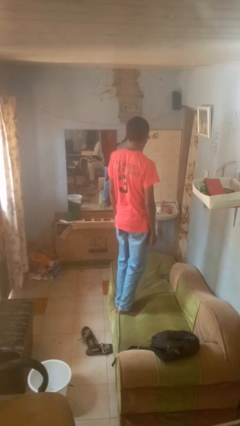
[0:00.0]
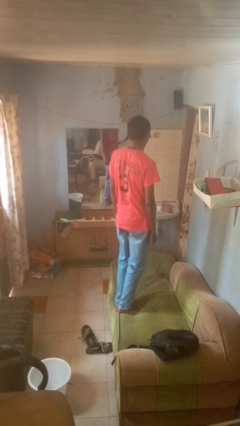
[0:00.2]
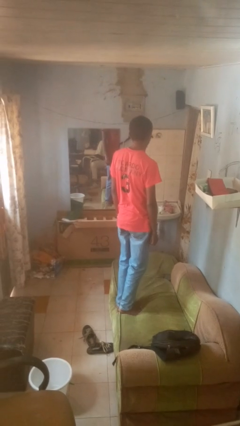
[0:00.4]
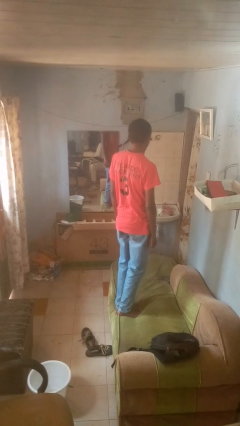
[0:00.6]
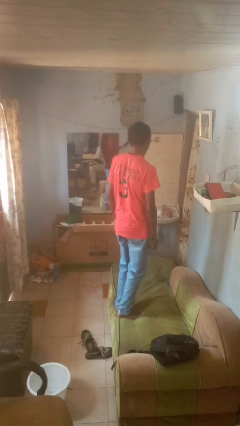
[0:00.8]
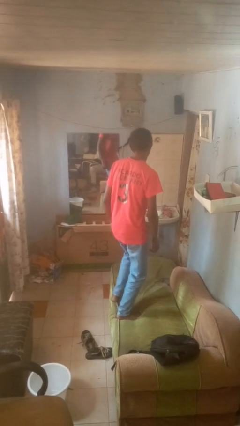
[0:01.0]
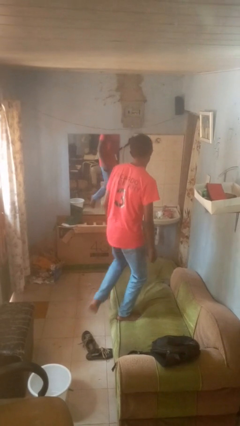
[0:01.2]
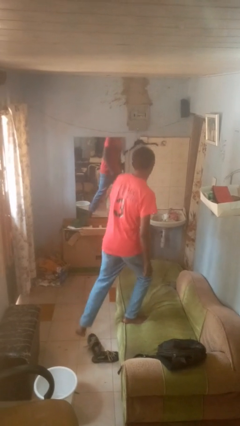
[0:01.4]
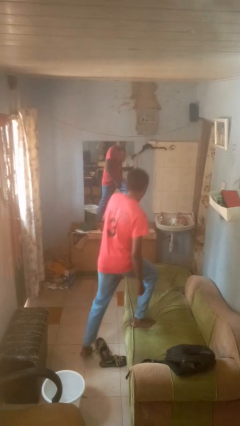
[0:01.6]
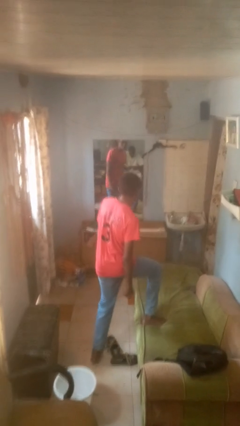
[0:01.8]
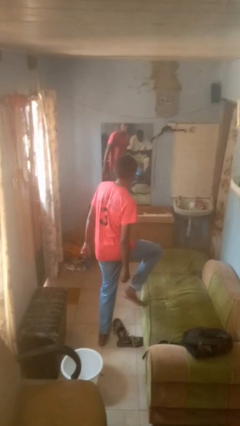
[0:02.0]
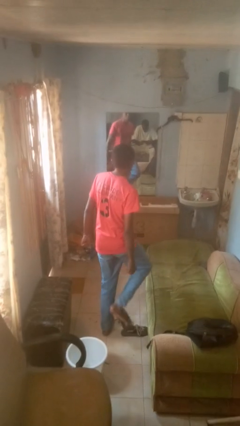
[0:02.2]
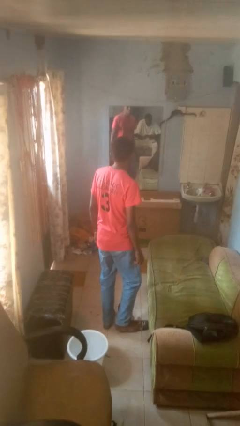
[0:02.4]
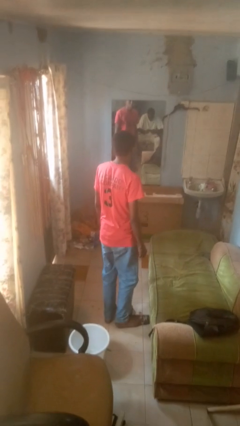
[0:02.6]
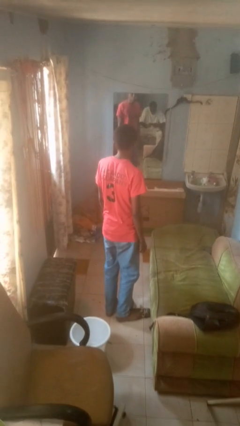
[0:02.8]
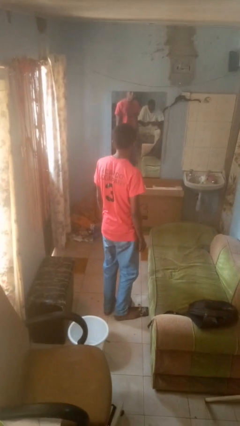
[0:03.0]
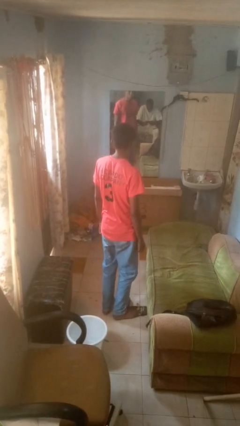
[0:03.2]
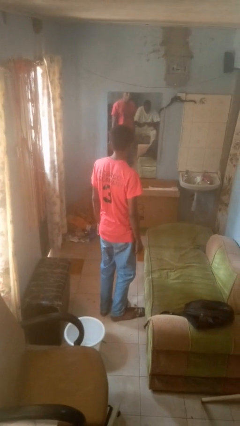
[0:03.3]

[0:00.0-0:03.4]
person climbs off couch

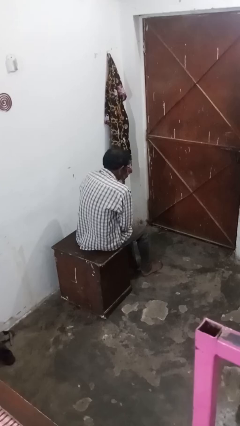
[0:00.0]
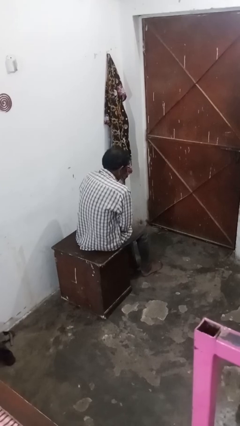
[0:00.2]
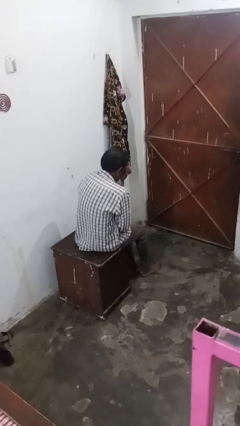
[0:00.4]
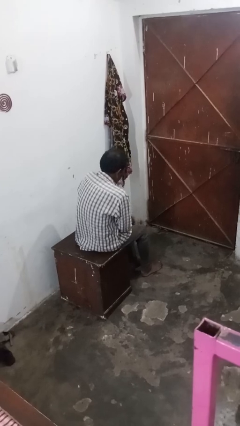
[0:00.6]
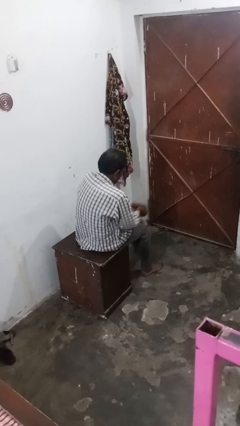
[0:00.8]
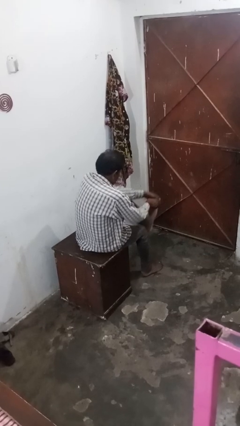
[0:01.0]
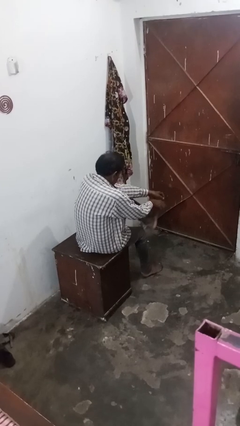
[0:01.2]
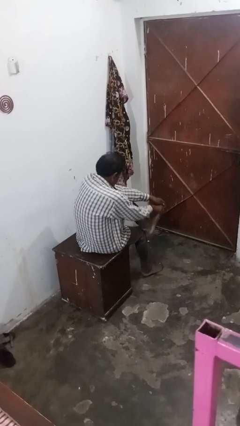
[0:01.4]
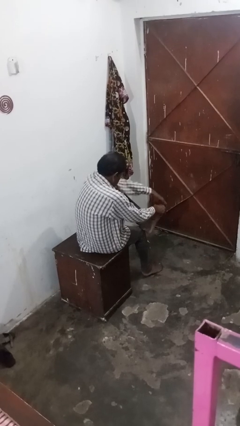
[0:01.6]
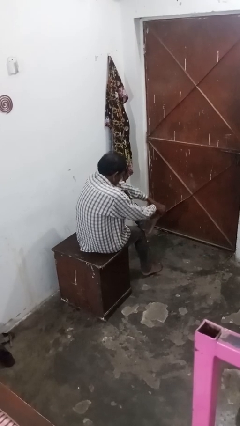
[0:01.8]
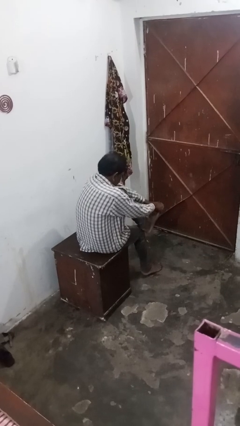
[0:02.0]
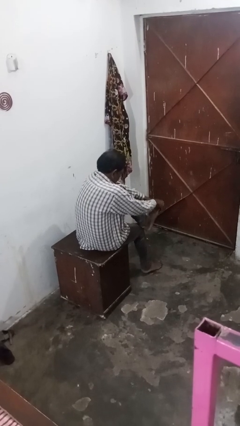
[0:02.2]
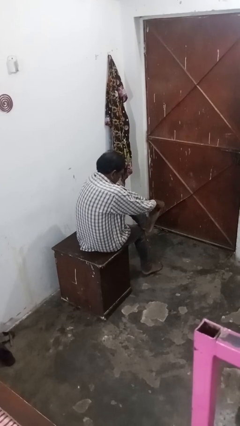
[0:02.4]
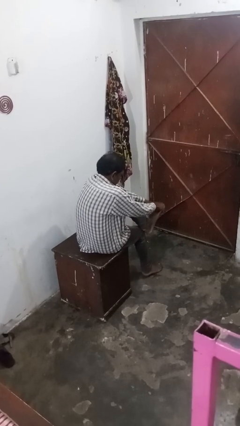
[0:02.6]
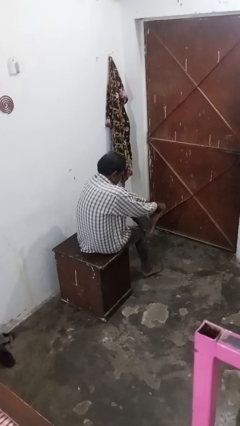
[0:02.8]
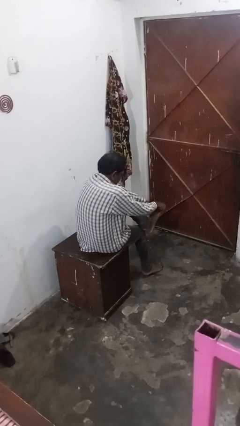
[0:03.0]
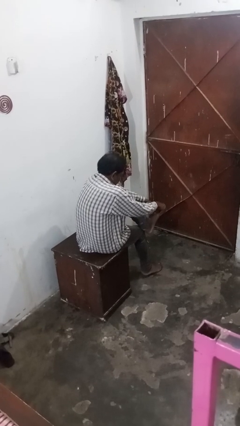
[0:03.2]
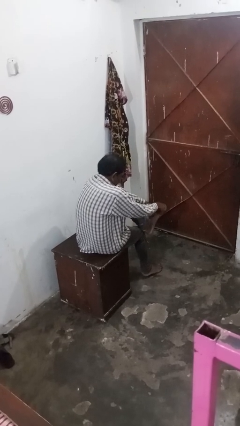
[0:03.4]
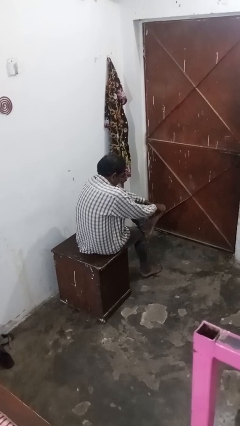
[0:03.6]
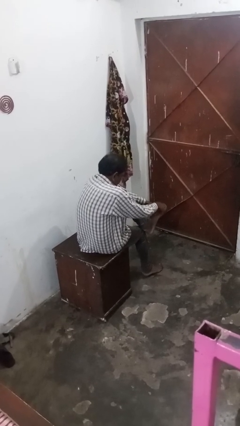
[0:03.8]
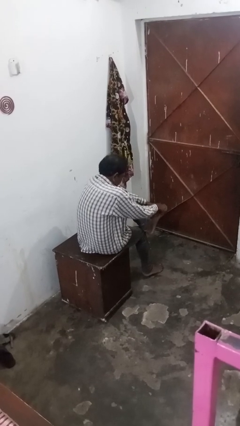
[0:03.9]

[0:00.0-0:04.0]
person rubs foot

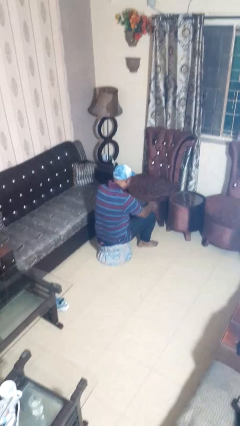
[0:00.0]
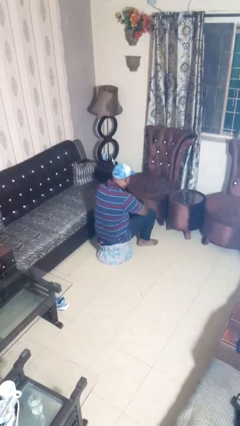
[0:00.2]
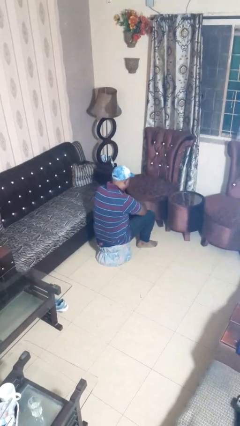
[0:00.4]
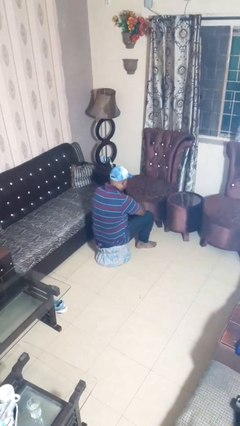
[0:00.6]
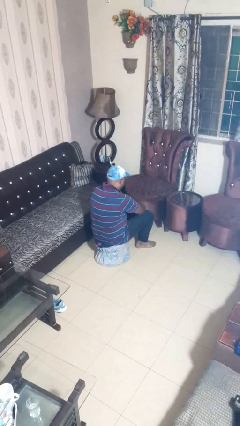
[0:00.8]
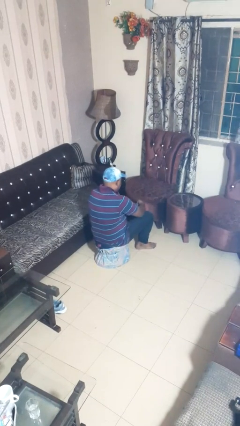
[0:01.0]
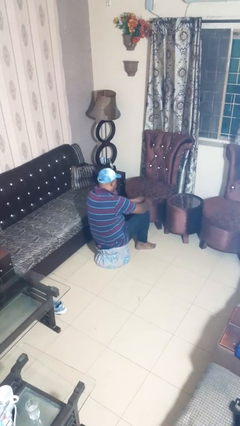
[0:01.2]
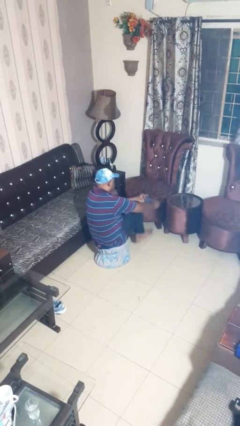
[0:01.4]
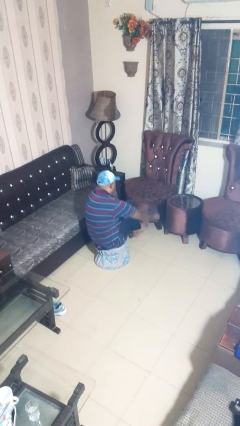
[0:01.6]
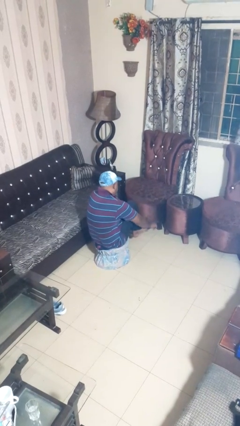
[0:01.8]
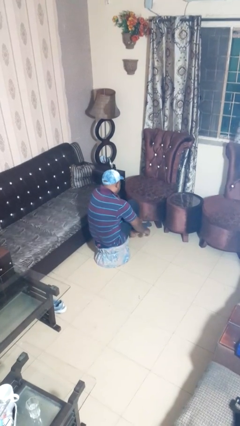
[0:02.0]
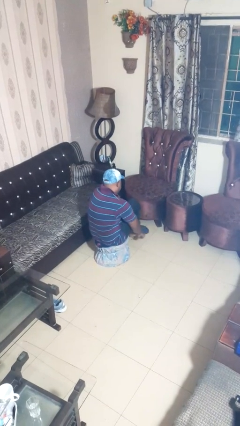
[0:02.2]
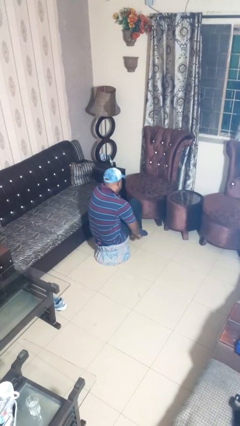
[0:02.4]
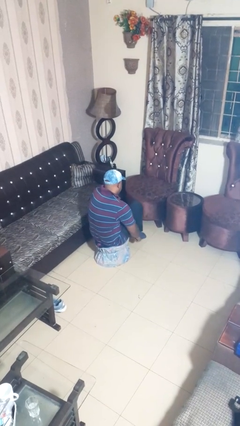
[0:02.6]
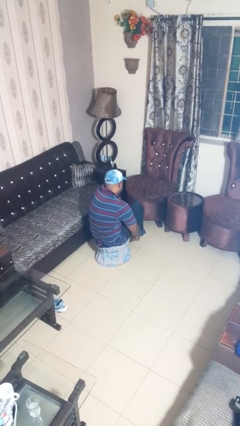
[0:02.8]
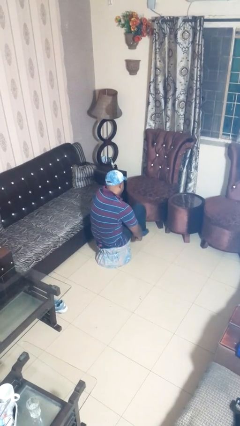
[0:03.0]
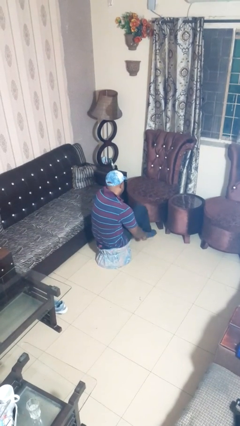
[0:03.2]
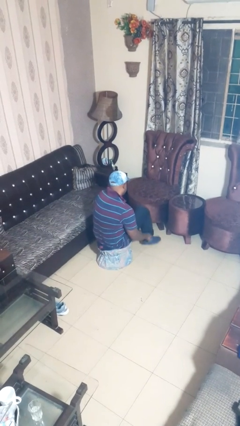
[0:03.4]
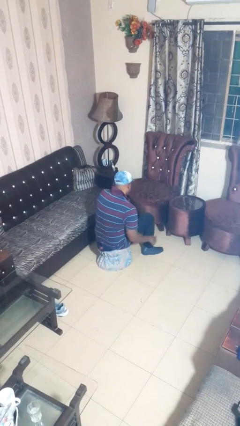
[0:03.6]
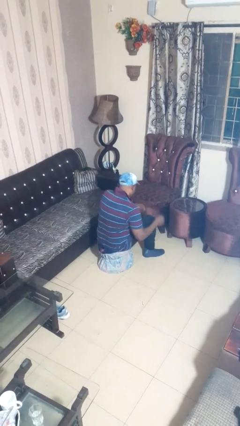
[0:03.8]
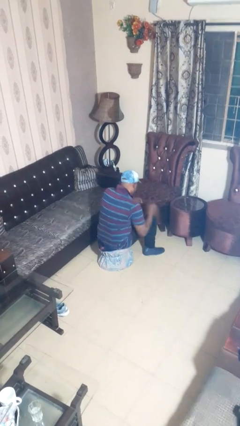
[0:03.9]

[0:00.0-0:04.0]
person puts on socks

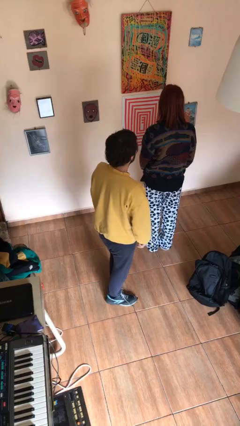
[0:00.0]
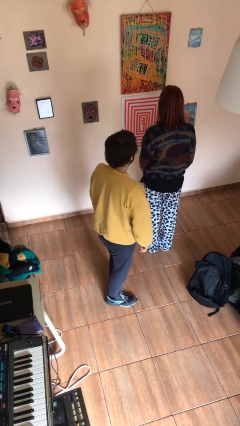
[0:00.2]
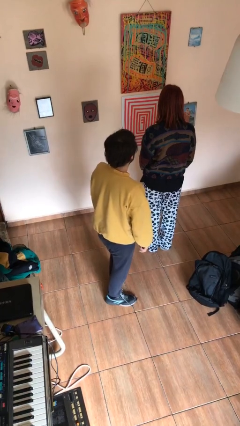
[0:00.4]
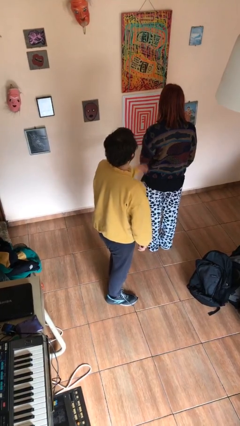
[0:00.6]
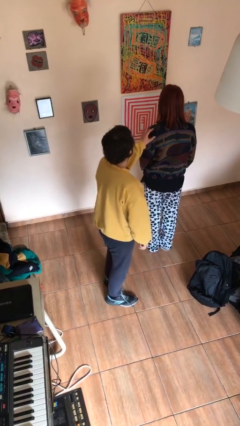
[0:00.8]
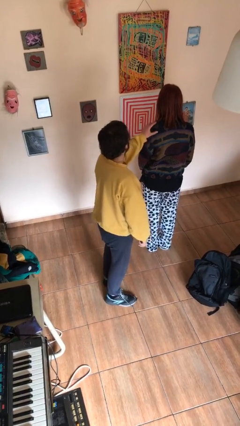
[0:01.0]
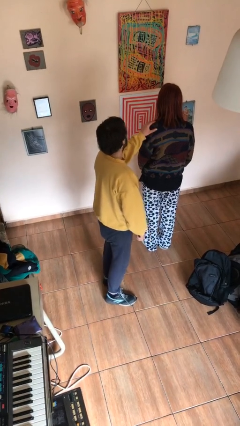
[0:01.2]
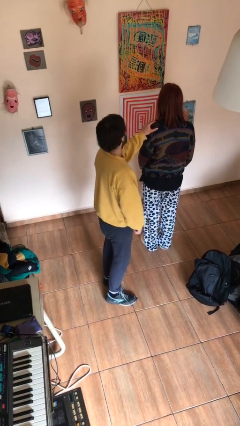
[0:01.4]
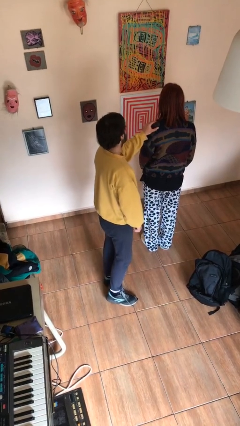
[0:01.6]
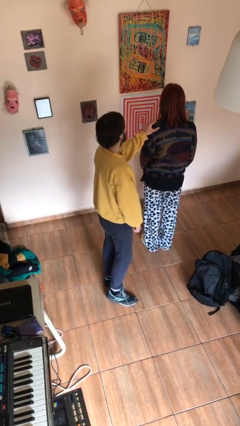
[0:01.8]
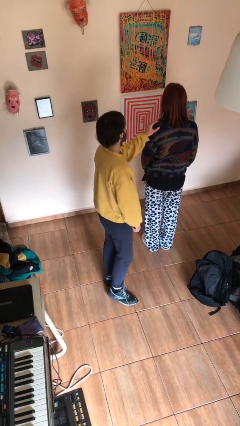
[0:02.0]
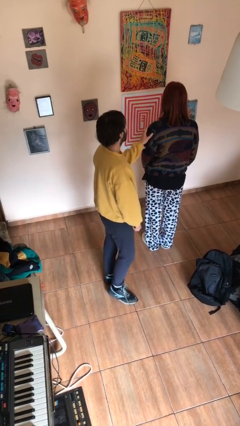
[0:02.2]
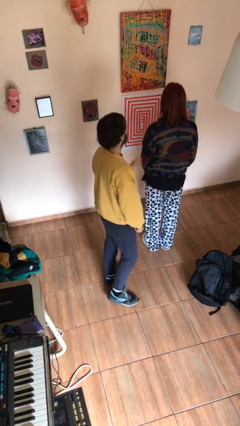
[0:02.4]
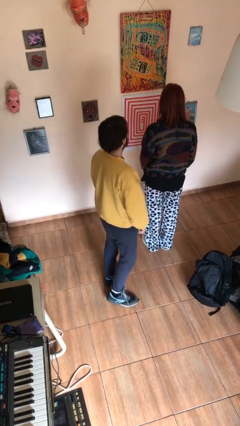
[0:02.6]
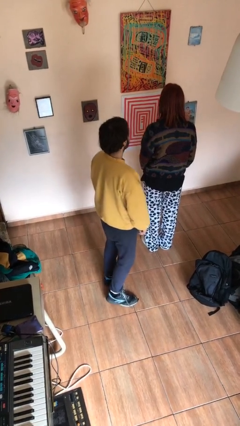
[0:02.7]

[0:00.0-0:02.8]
person touches back of person

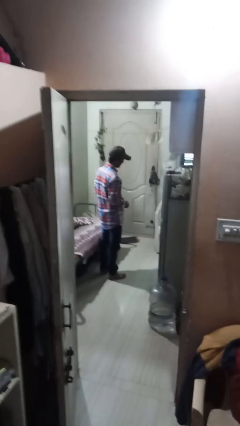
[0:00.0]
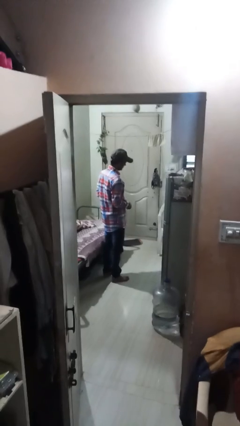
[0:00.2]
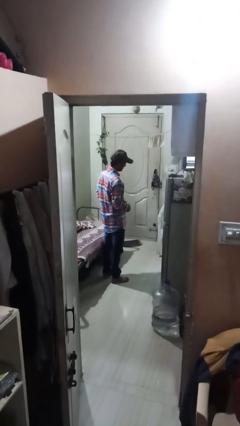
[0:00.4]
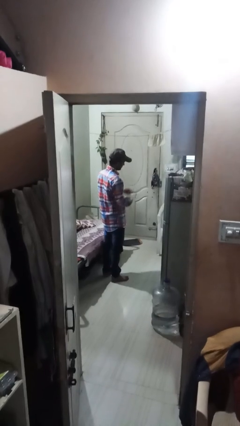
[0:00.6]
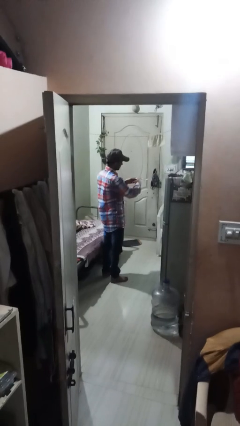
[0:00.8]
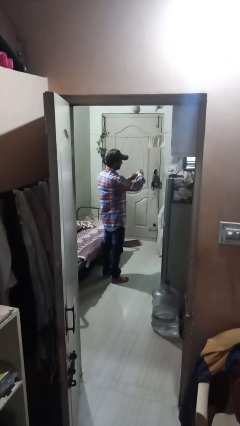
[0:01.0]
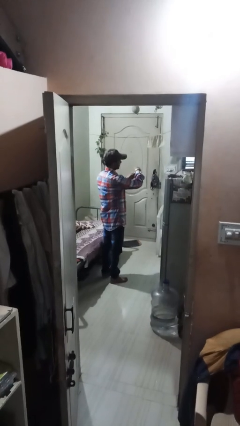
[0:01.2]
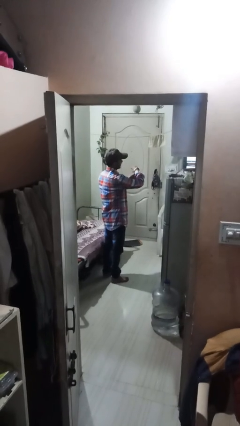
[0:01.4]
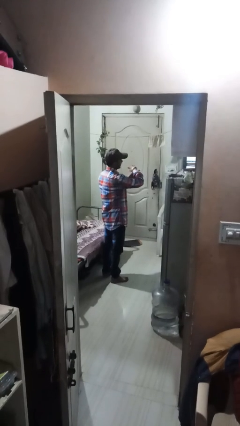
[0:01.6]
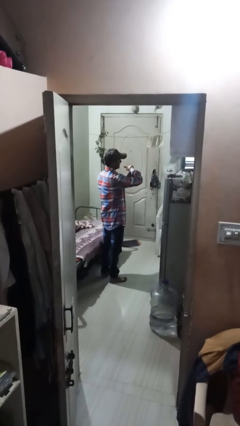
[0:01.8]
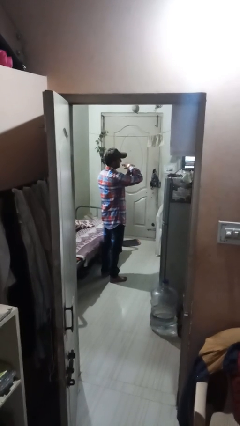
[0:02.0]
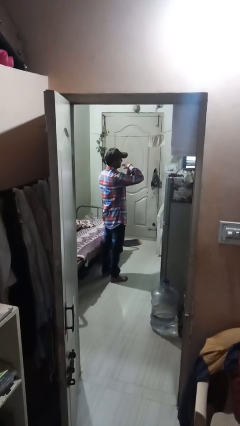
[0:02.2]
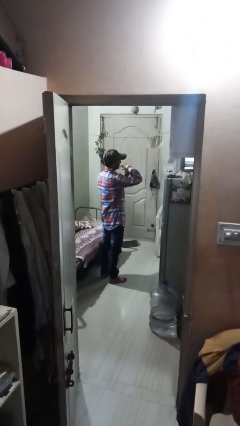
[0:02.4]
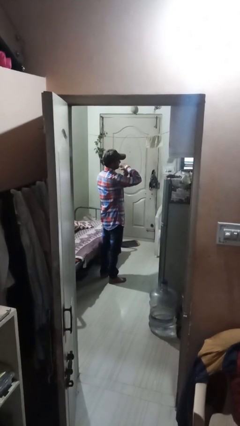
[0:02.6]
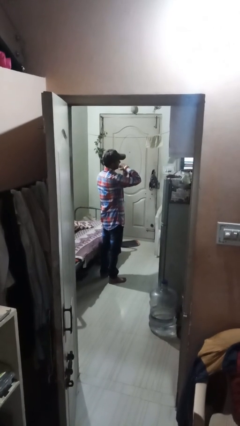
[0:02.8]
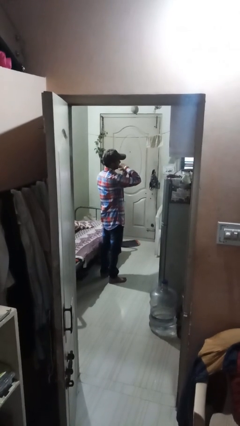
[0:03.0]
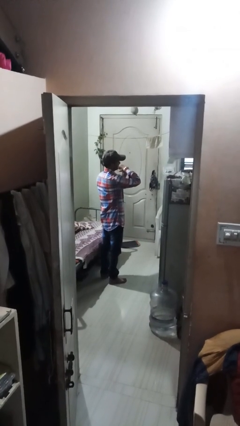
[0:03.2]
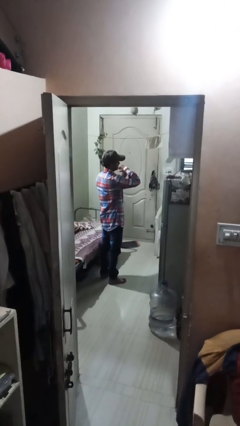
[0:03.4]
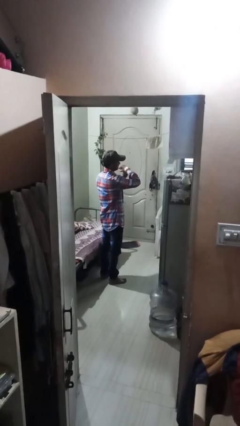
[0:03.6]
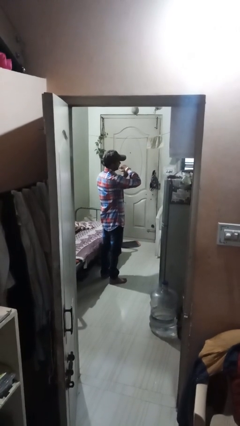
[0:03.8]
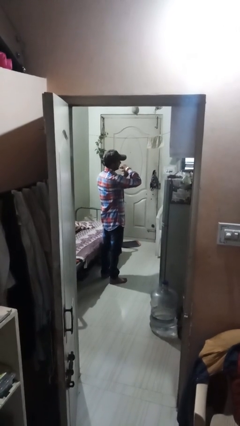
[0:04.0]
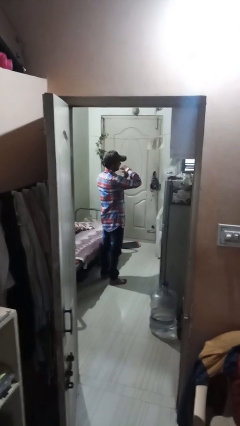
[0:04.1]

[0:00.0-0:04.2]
person puts on wristwatch
